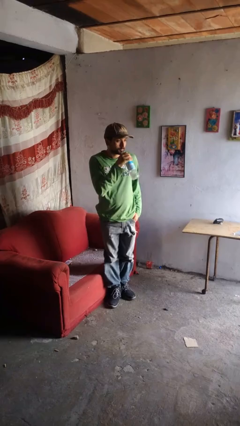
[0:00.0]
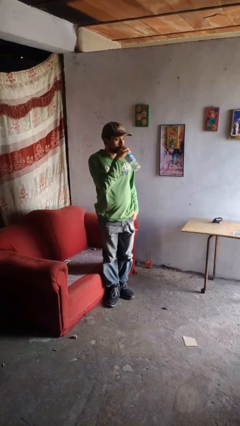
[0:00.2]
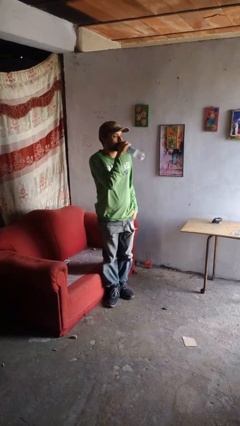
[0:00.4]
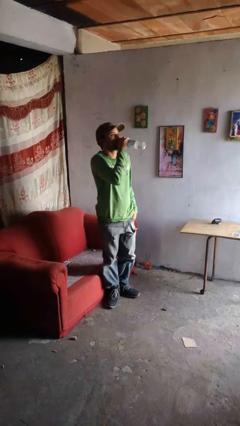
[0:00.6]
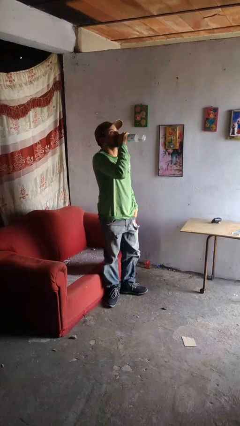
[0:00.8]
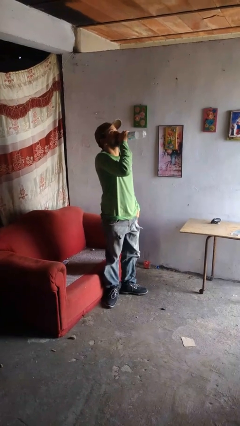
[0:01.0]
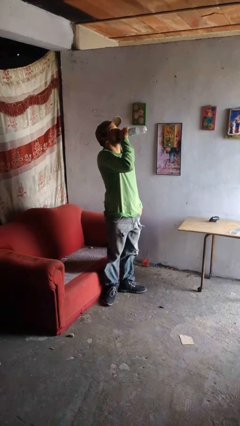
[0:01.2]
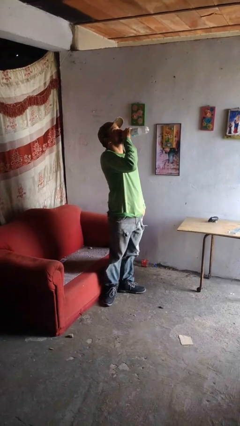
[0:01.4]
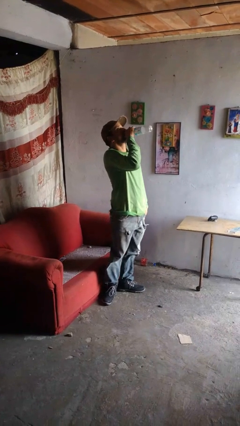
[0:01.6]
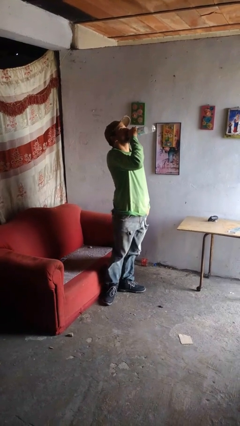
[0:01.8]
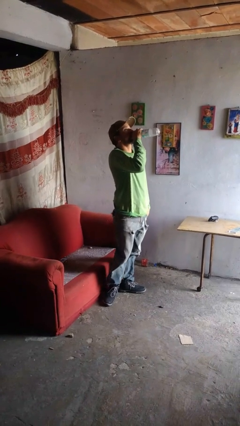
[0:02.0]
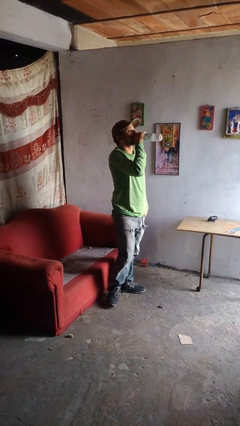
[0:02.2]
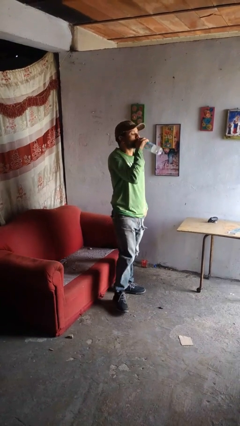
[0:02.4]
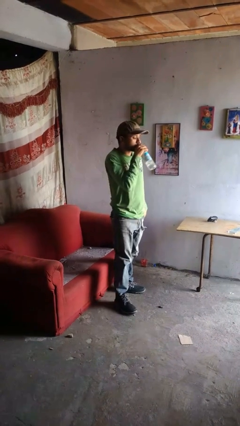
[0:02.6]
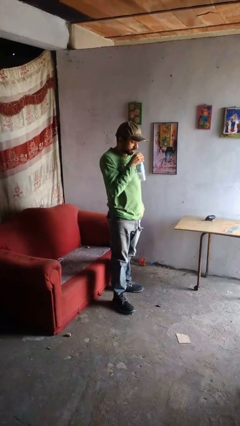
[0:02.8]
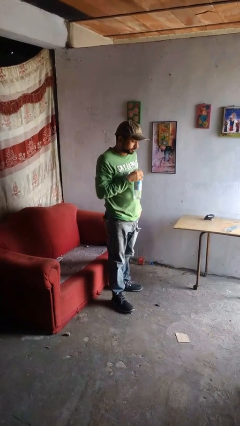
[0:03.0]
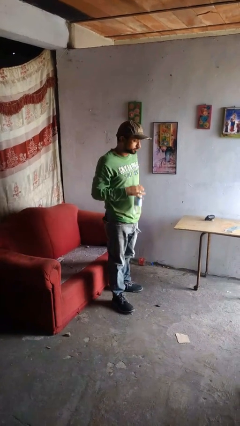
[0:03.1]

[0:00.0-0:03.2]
person drinks from bottle

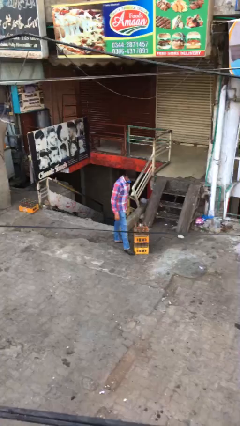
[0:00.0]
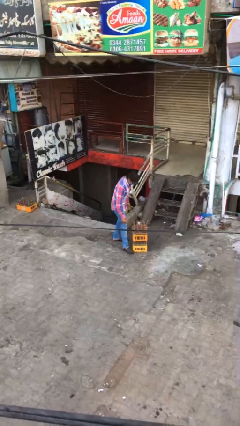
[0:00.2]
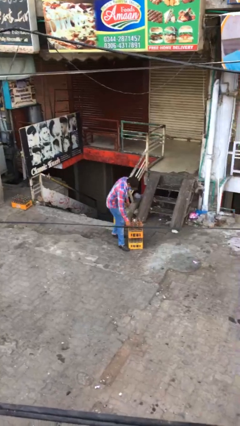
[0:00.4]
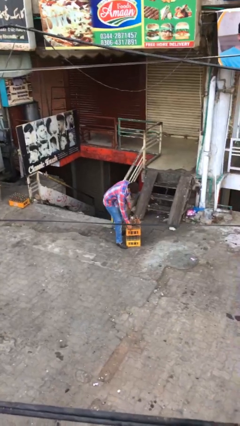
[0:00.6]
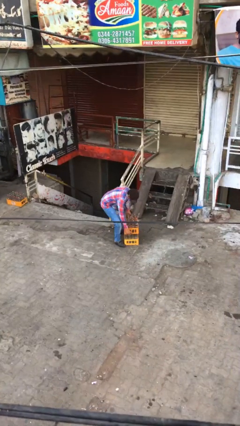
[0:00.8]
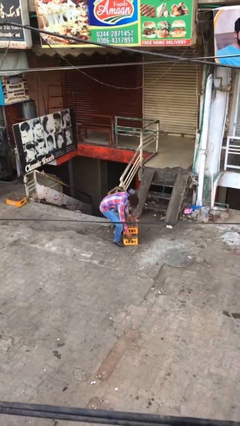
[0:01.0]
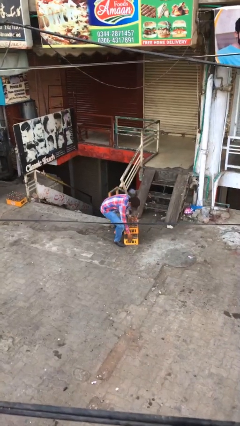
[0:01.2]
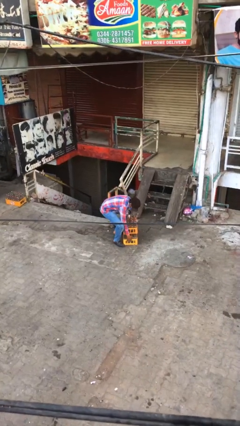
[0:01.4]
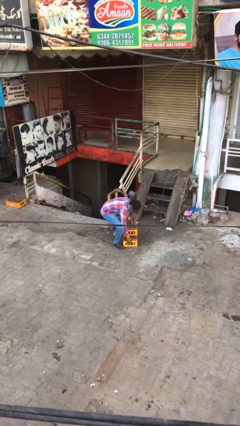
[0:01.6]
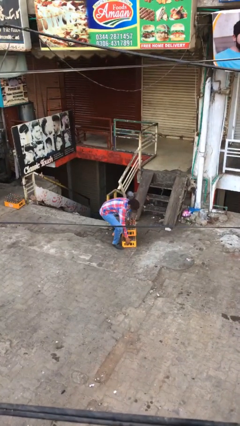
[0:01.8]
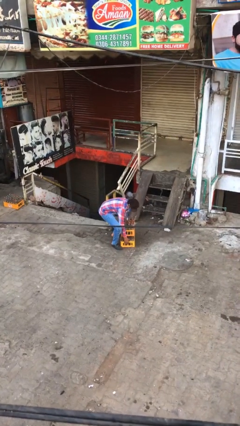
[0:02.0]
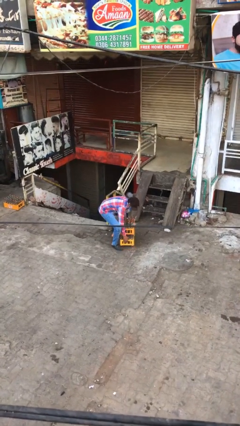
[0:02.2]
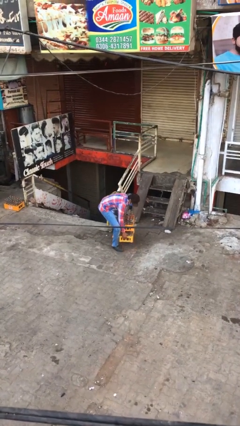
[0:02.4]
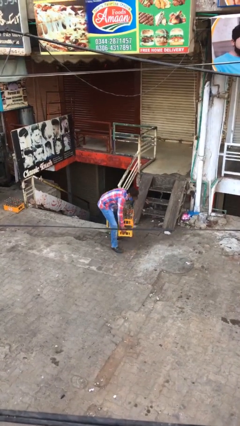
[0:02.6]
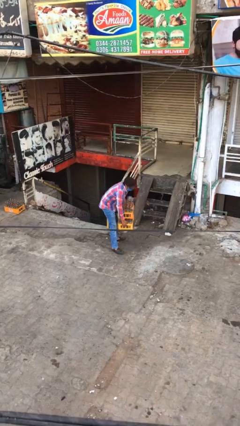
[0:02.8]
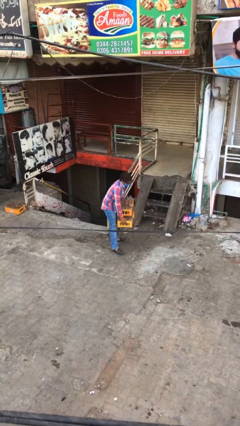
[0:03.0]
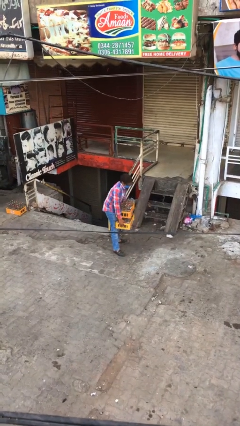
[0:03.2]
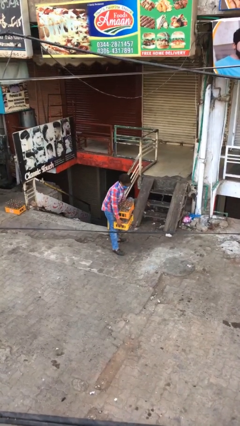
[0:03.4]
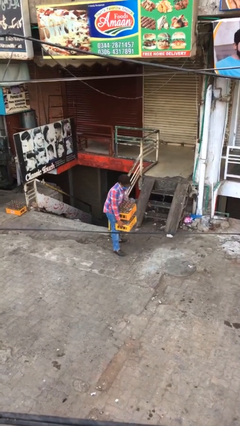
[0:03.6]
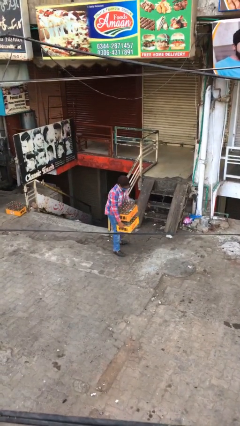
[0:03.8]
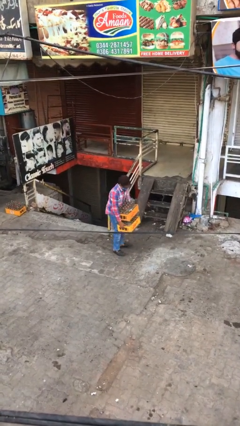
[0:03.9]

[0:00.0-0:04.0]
person picks up object from floor

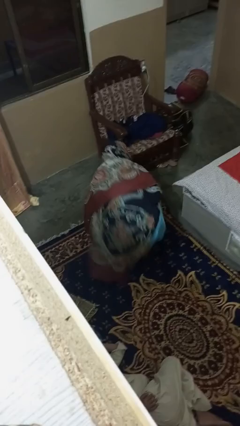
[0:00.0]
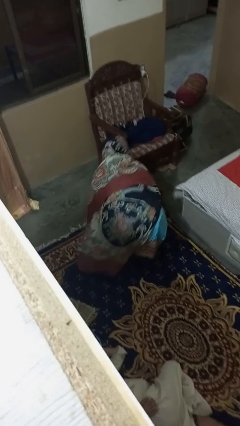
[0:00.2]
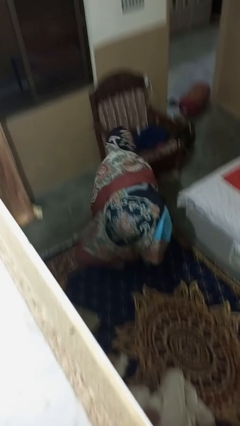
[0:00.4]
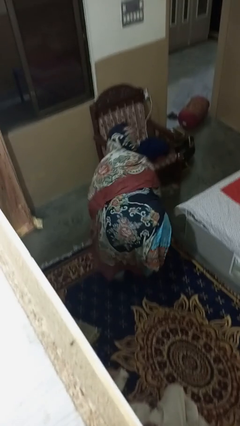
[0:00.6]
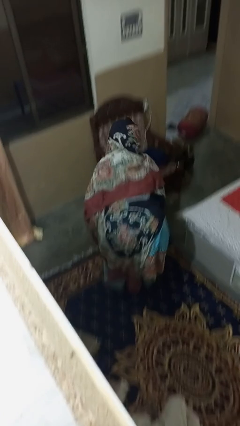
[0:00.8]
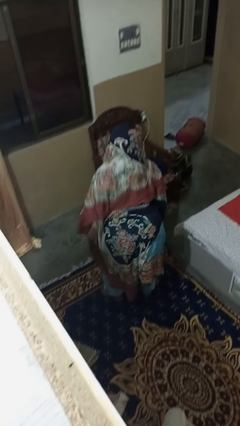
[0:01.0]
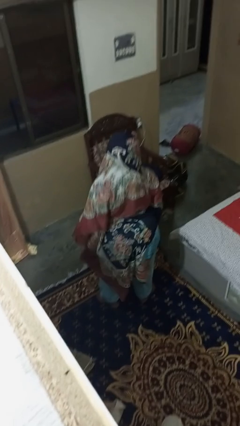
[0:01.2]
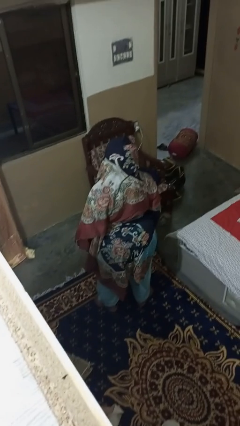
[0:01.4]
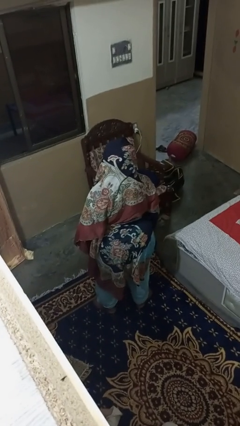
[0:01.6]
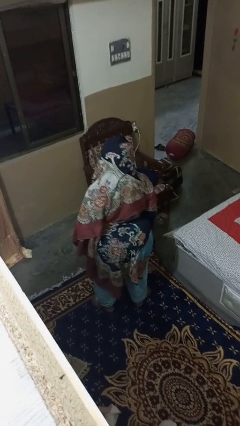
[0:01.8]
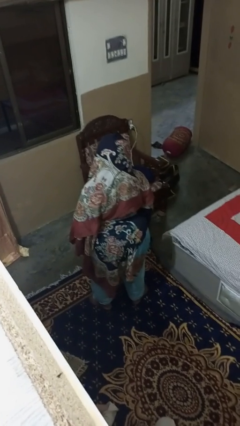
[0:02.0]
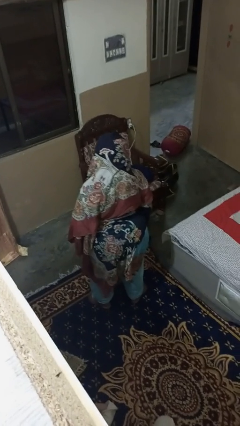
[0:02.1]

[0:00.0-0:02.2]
person stands up

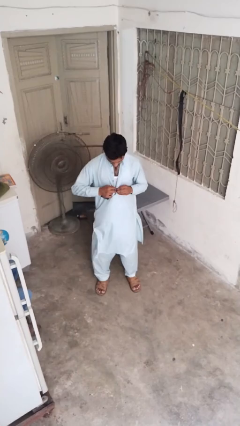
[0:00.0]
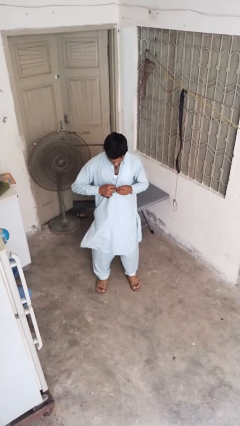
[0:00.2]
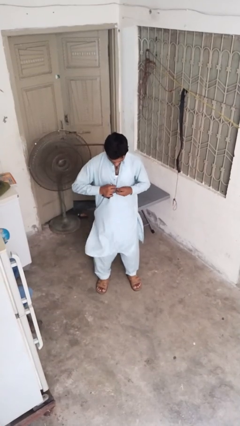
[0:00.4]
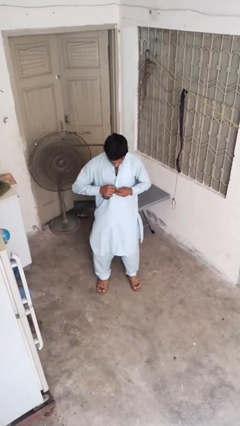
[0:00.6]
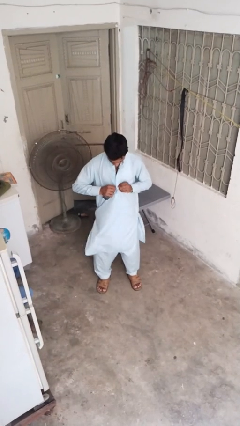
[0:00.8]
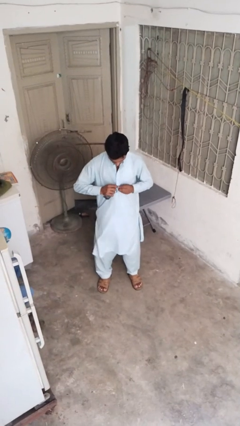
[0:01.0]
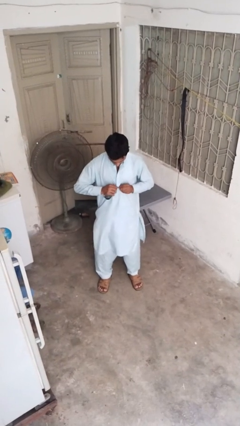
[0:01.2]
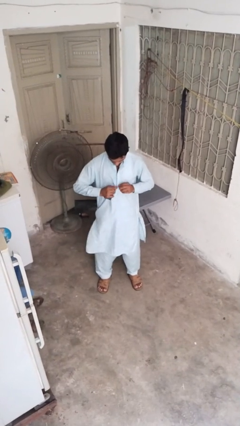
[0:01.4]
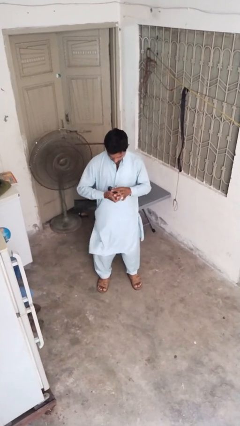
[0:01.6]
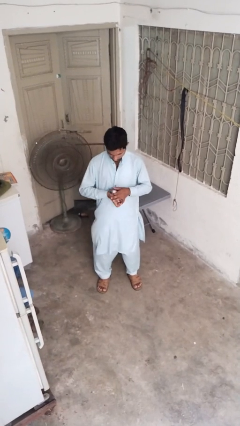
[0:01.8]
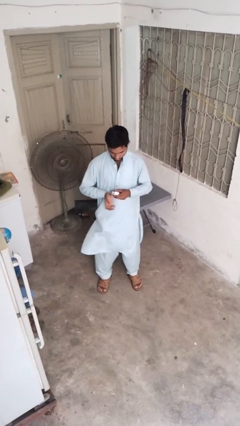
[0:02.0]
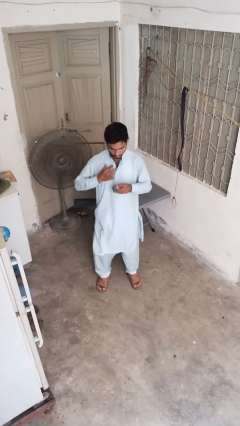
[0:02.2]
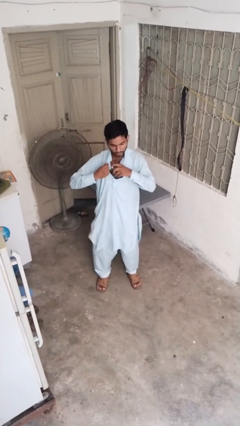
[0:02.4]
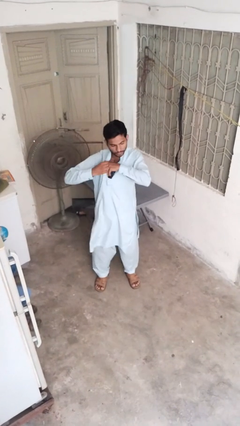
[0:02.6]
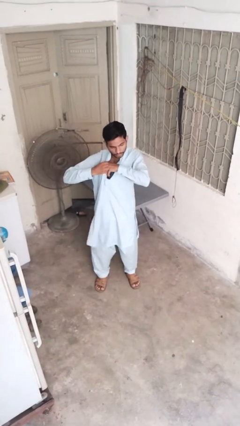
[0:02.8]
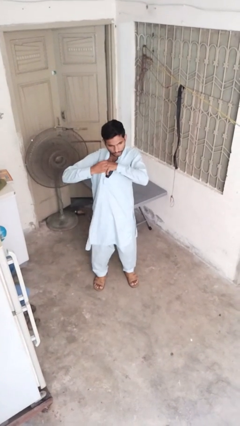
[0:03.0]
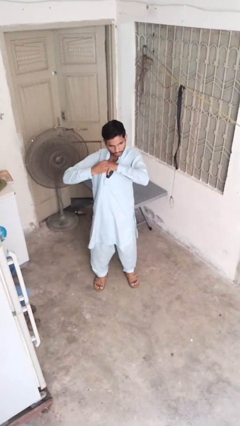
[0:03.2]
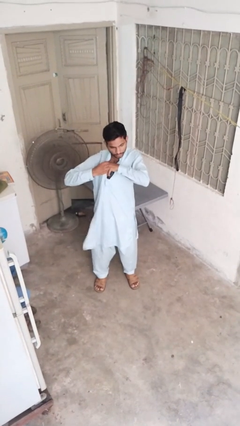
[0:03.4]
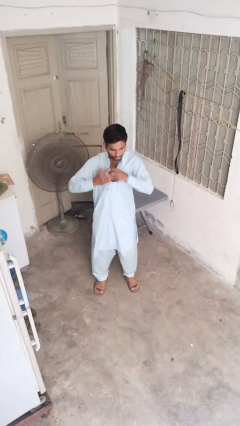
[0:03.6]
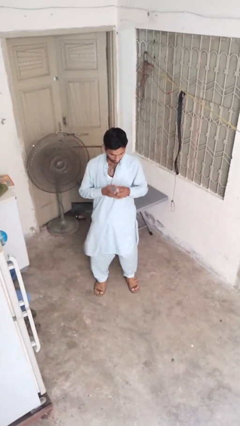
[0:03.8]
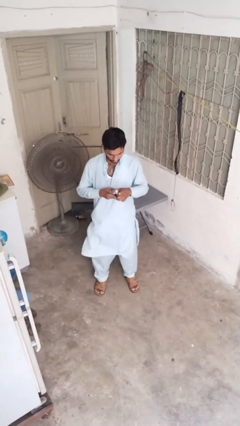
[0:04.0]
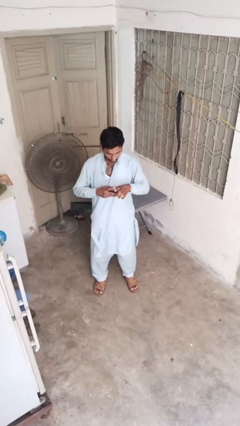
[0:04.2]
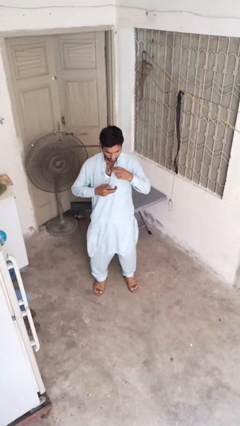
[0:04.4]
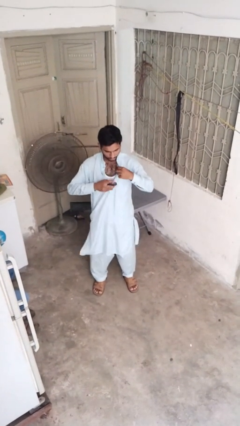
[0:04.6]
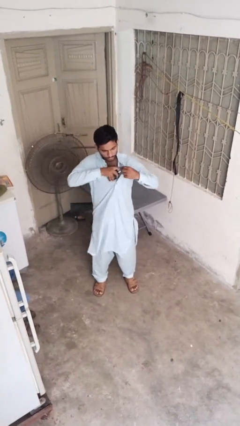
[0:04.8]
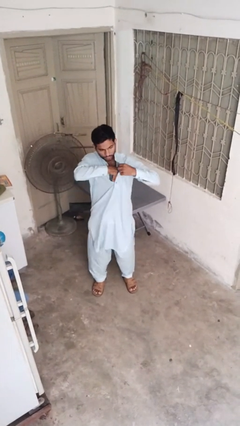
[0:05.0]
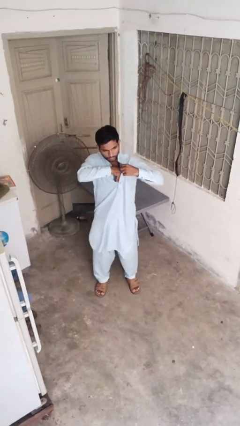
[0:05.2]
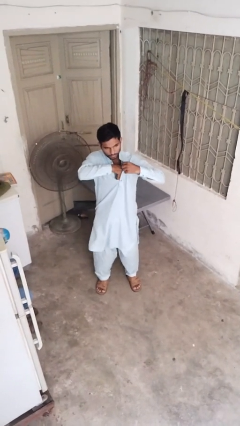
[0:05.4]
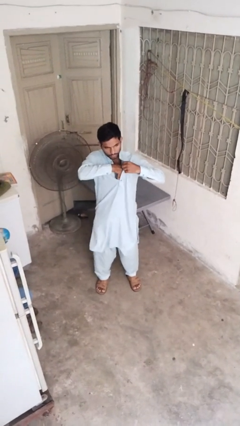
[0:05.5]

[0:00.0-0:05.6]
person applies deodorant

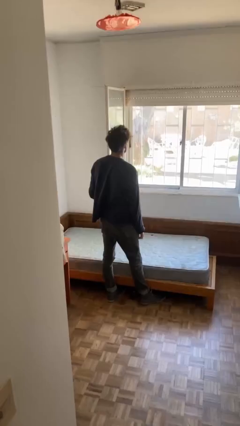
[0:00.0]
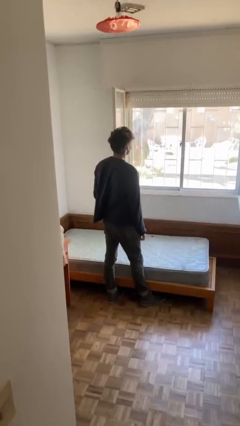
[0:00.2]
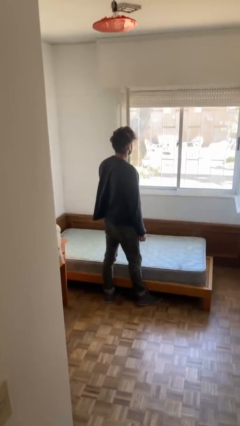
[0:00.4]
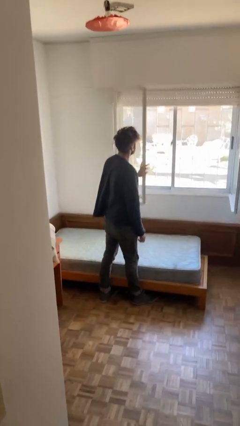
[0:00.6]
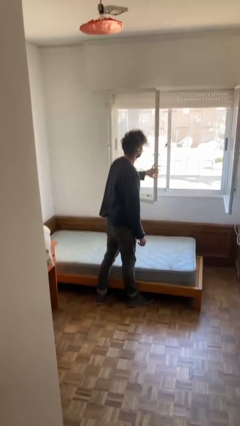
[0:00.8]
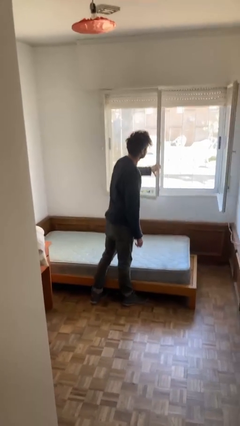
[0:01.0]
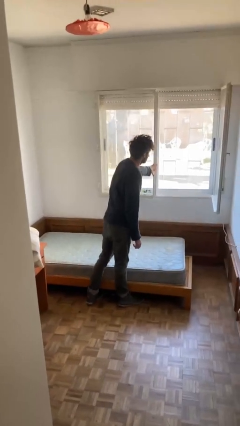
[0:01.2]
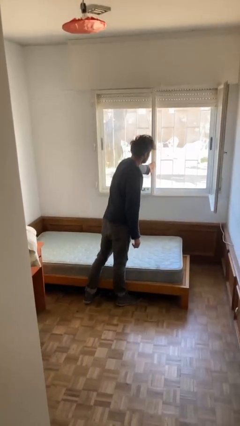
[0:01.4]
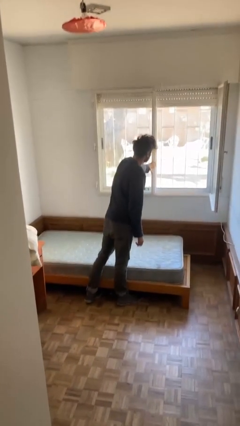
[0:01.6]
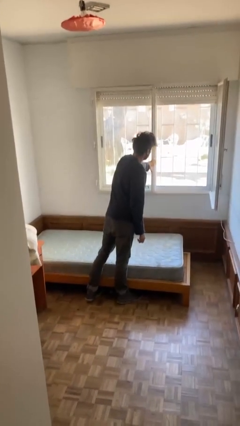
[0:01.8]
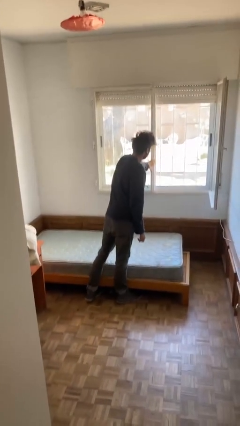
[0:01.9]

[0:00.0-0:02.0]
person closes home window

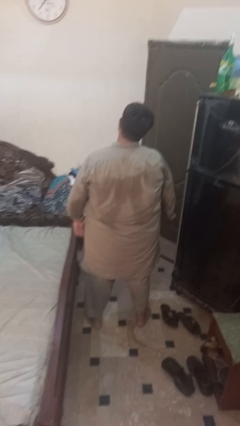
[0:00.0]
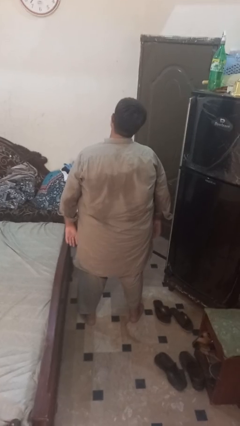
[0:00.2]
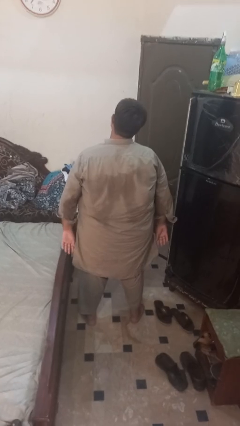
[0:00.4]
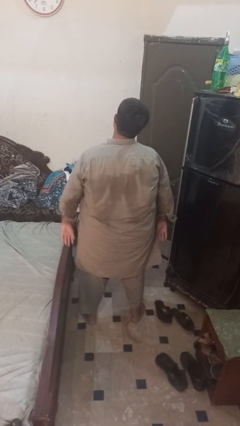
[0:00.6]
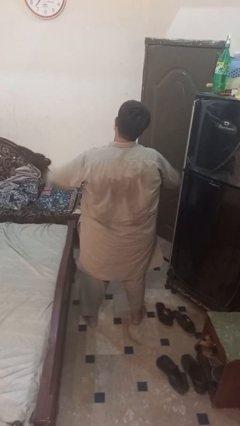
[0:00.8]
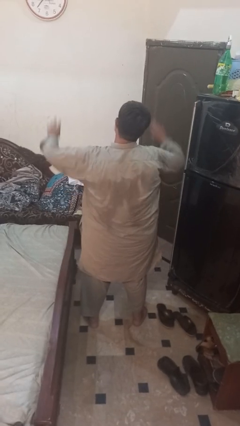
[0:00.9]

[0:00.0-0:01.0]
person dances in place
